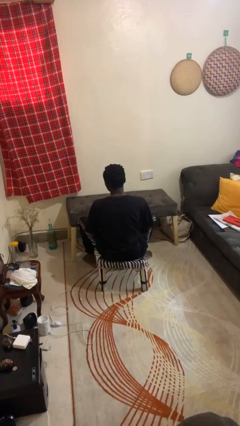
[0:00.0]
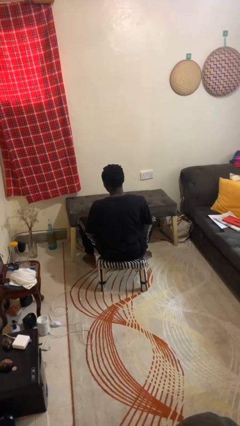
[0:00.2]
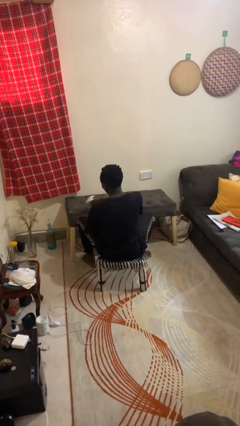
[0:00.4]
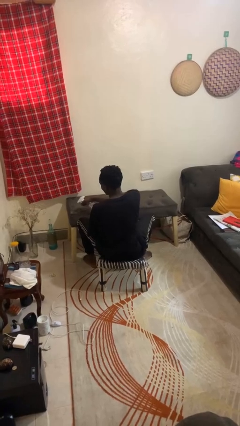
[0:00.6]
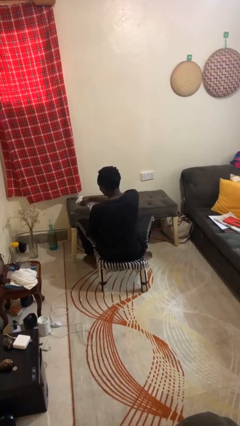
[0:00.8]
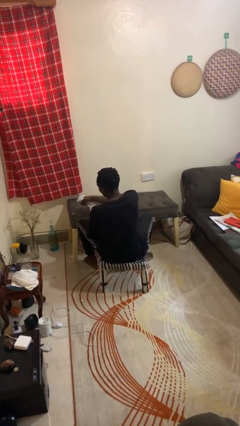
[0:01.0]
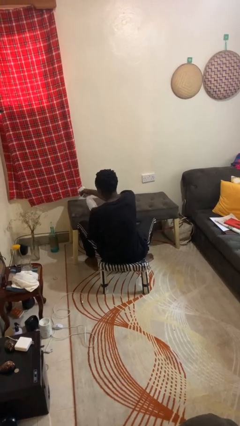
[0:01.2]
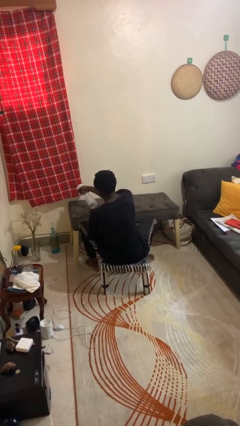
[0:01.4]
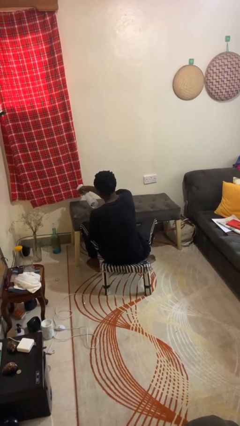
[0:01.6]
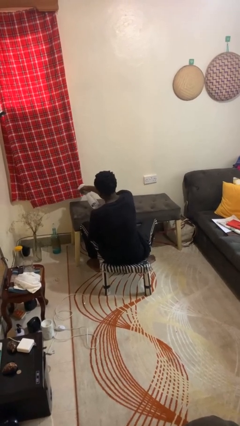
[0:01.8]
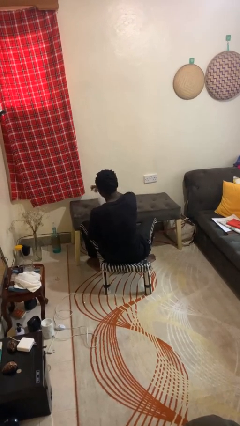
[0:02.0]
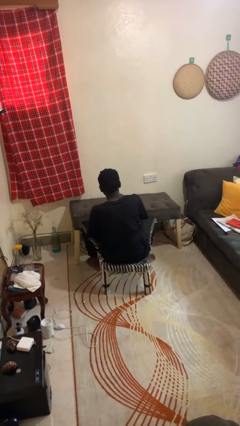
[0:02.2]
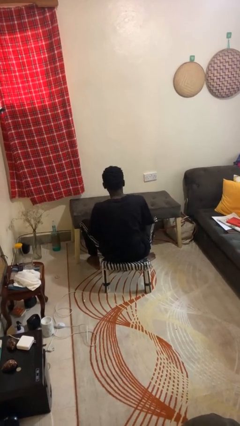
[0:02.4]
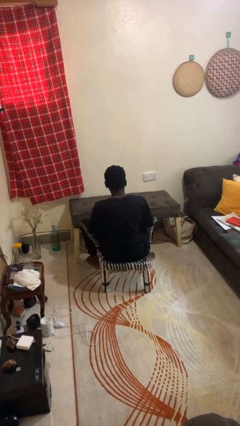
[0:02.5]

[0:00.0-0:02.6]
person sprays from bottle

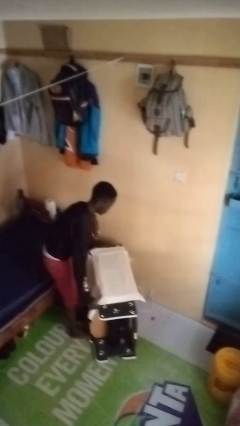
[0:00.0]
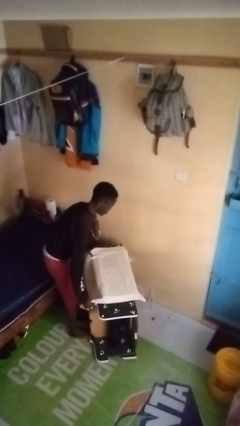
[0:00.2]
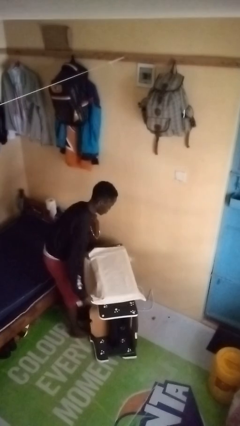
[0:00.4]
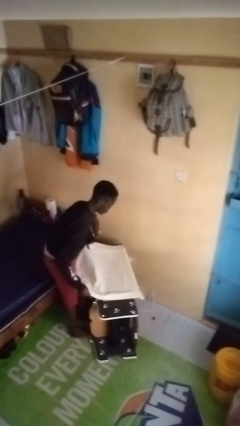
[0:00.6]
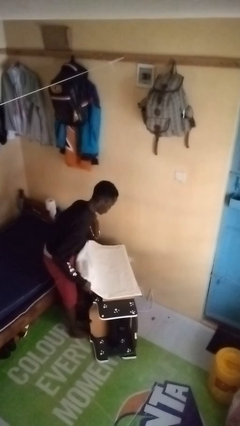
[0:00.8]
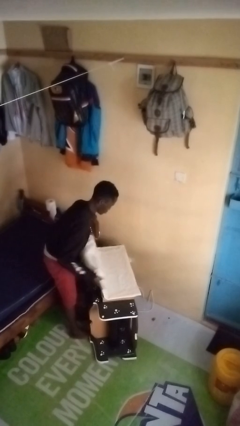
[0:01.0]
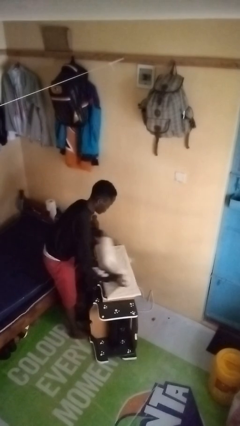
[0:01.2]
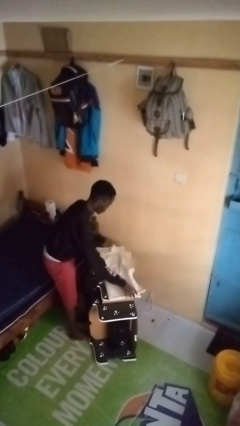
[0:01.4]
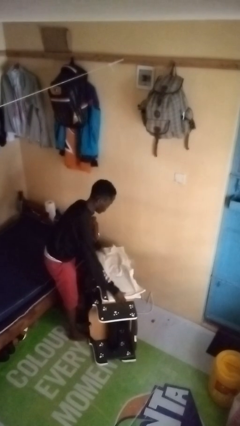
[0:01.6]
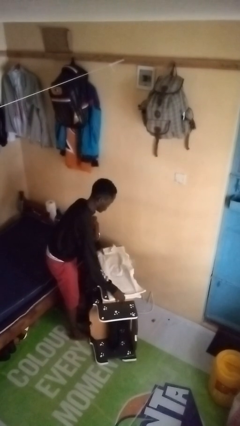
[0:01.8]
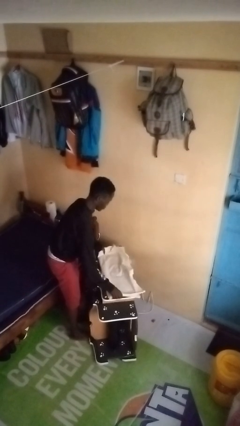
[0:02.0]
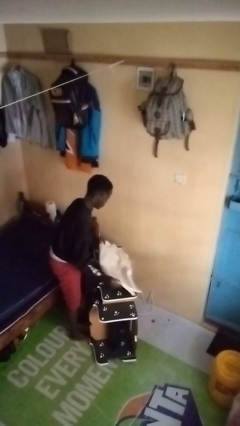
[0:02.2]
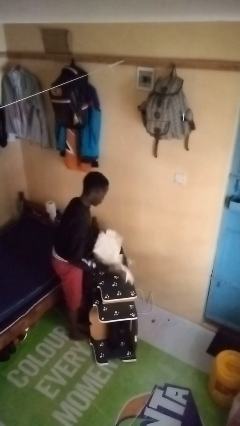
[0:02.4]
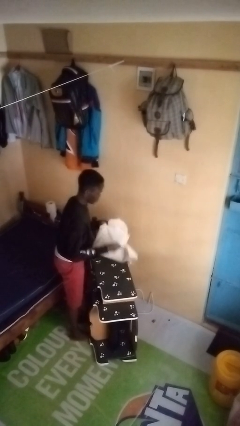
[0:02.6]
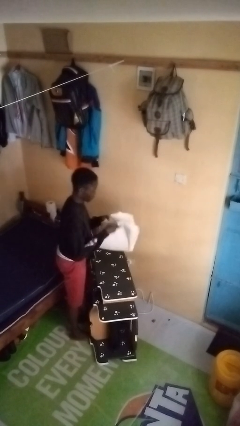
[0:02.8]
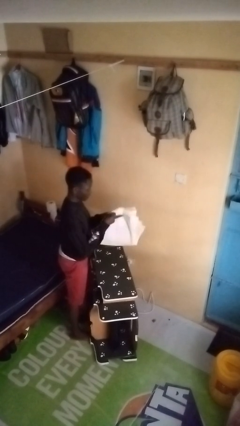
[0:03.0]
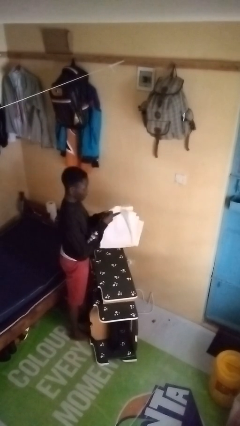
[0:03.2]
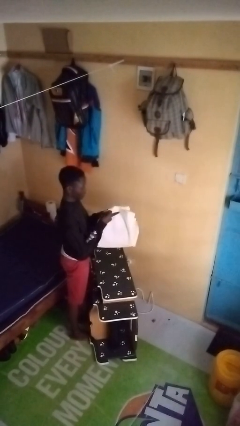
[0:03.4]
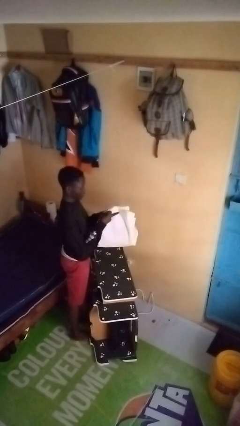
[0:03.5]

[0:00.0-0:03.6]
person folds tablecloth

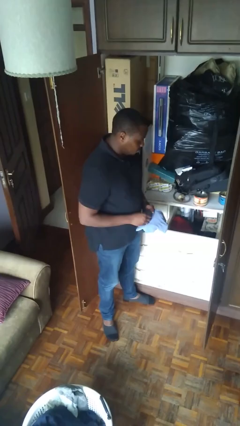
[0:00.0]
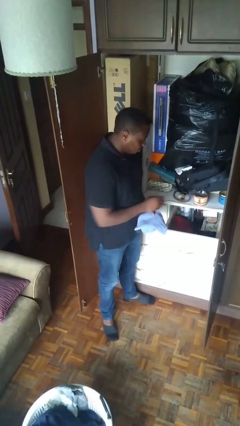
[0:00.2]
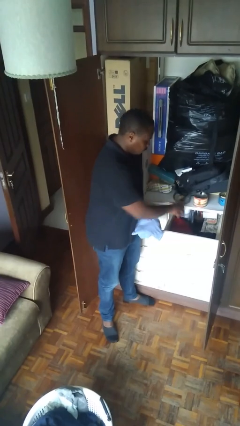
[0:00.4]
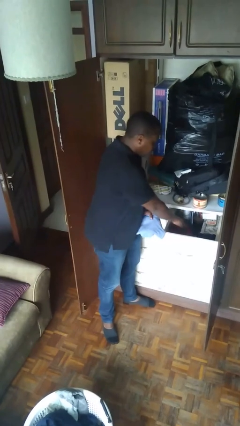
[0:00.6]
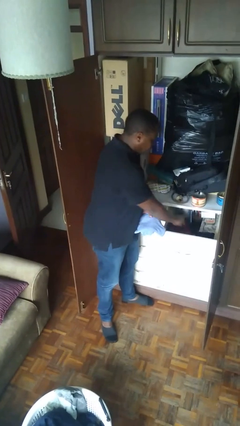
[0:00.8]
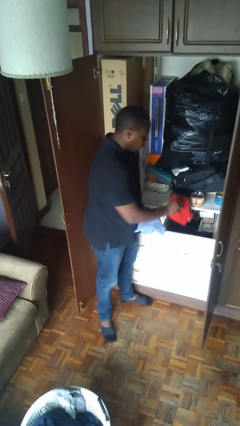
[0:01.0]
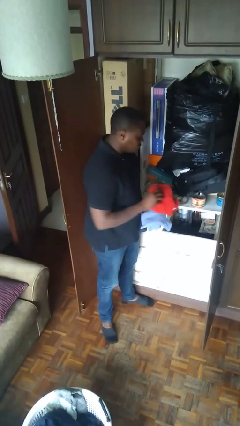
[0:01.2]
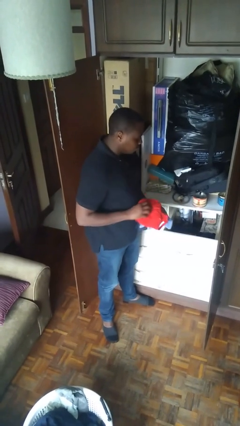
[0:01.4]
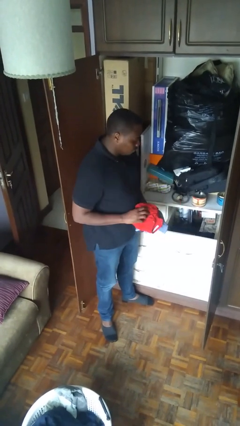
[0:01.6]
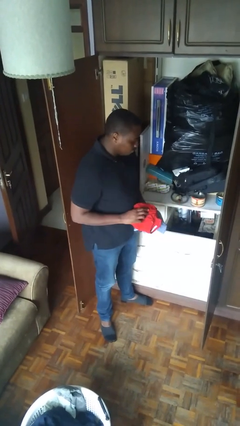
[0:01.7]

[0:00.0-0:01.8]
person takes clothes from dresser

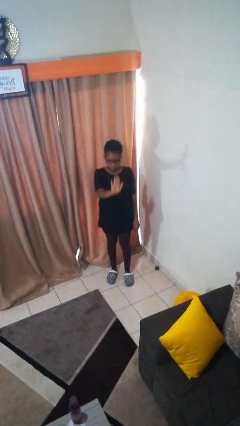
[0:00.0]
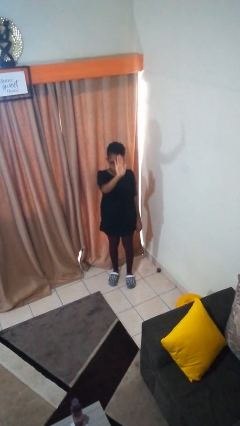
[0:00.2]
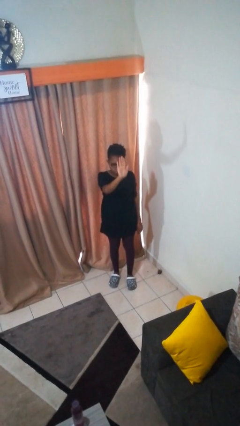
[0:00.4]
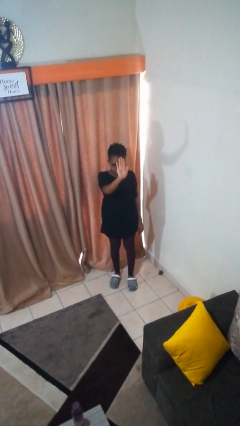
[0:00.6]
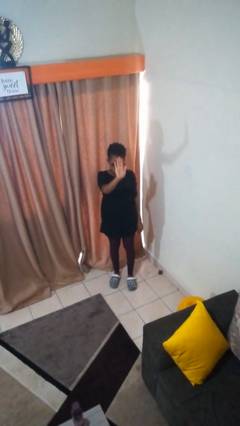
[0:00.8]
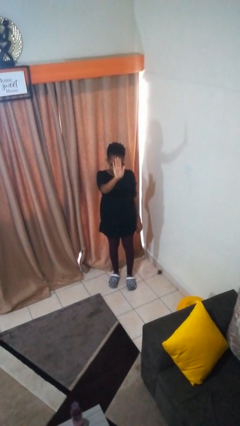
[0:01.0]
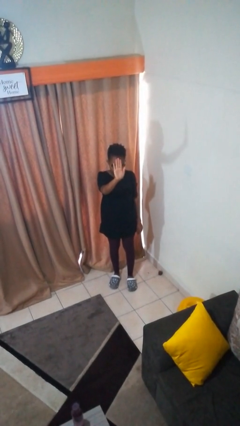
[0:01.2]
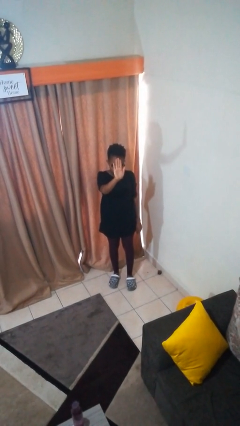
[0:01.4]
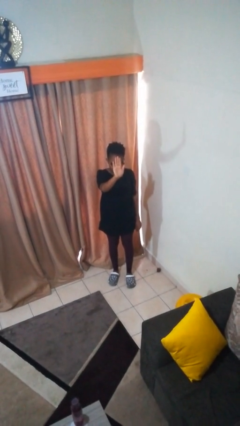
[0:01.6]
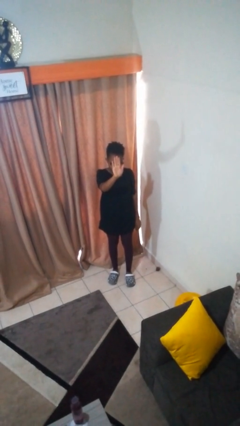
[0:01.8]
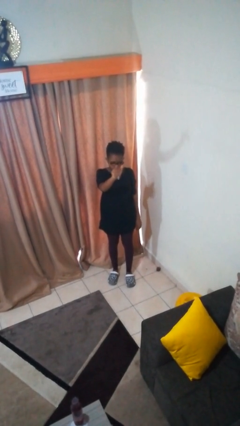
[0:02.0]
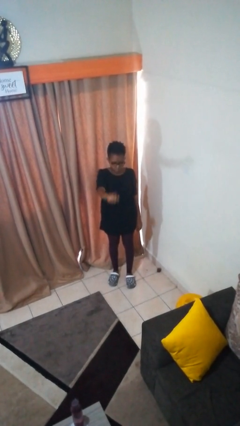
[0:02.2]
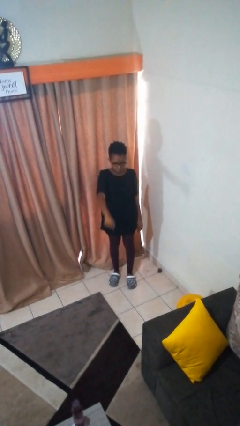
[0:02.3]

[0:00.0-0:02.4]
person gestures stop

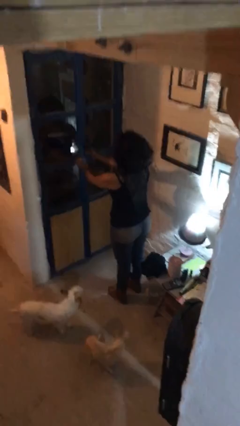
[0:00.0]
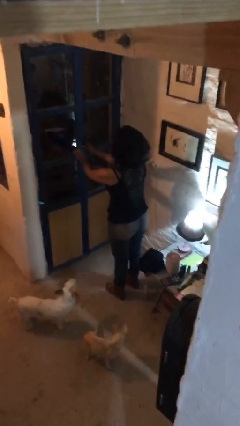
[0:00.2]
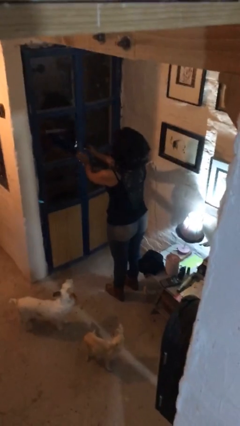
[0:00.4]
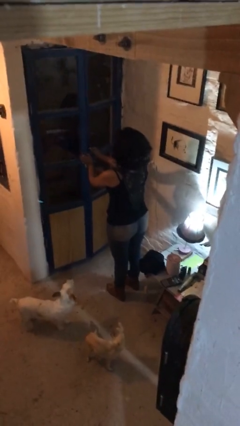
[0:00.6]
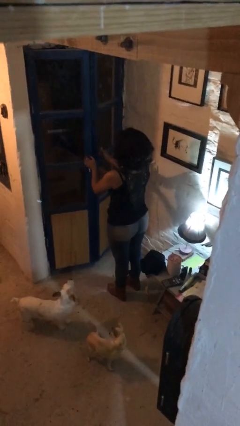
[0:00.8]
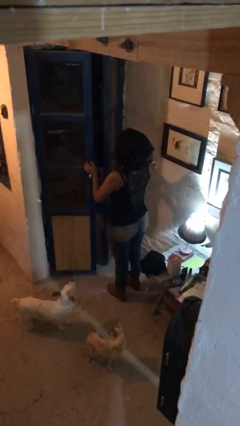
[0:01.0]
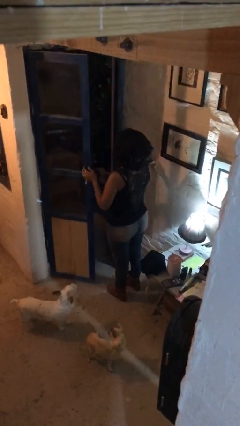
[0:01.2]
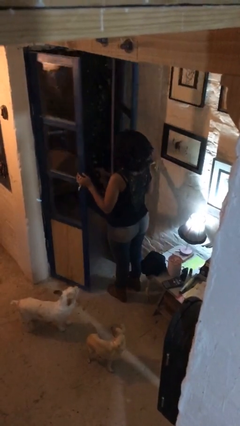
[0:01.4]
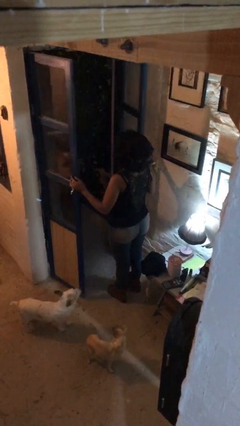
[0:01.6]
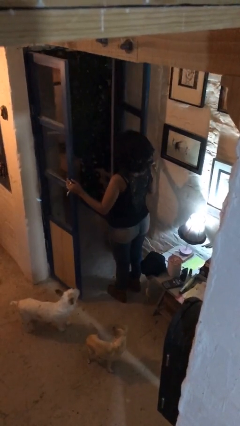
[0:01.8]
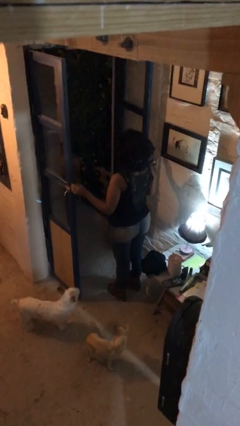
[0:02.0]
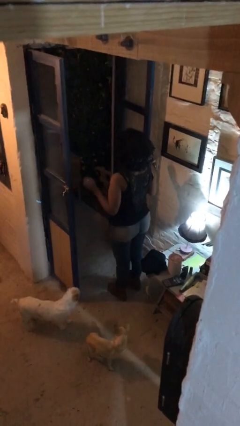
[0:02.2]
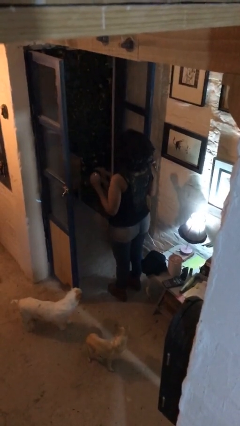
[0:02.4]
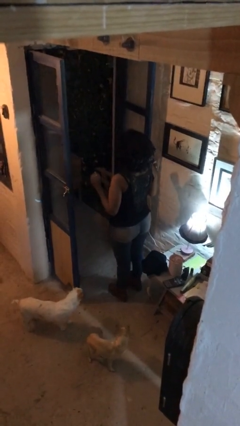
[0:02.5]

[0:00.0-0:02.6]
person opens facility door

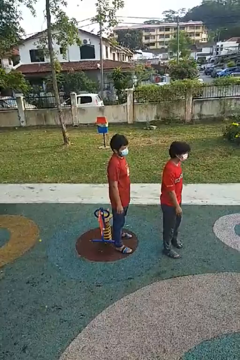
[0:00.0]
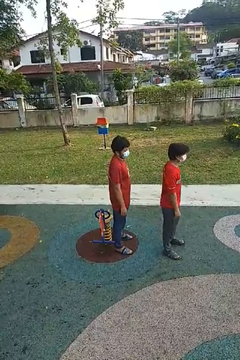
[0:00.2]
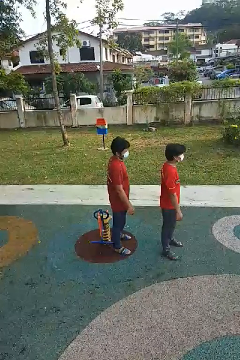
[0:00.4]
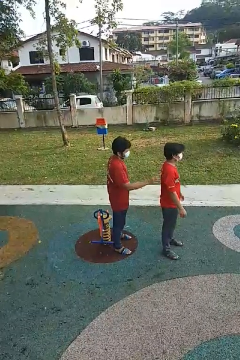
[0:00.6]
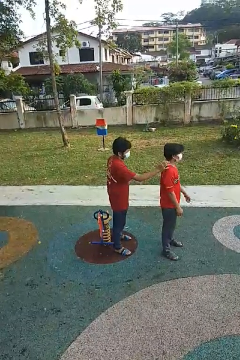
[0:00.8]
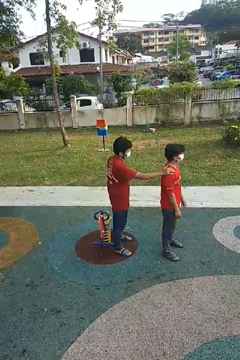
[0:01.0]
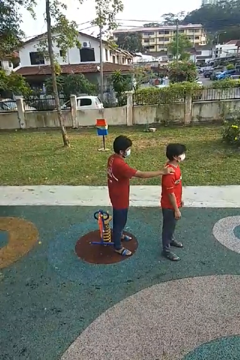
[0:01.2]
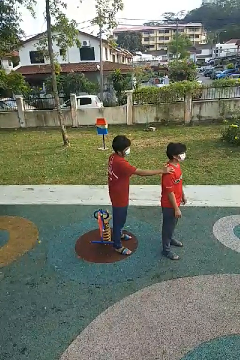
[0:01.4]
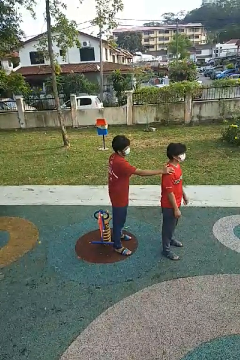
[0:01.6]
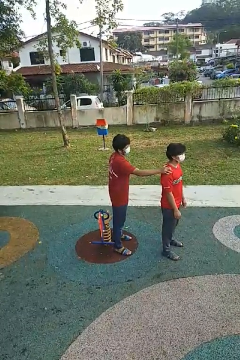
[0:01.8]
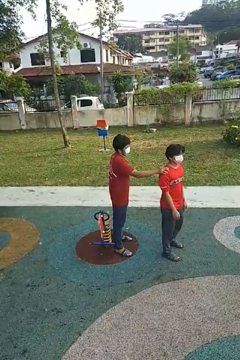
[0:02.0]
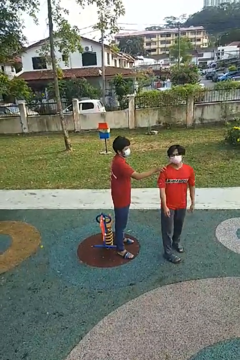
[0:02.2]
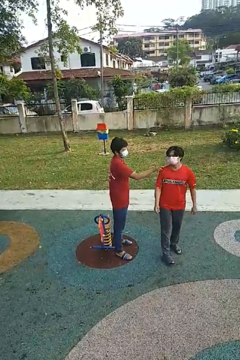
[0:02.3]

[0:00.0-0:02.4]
person grabs person by shoulder

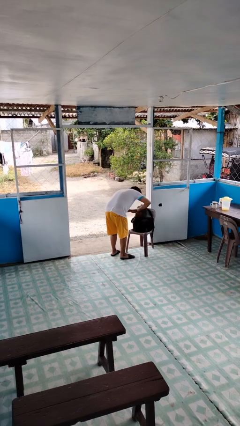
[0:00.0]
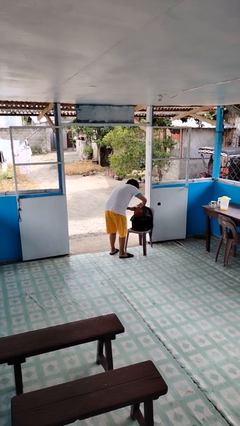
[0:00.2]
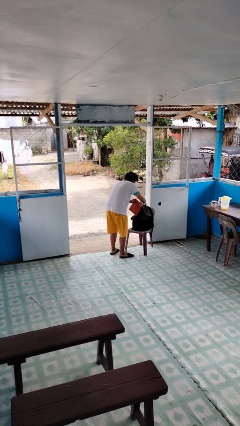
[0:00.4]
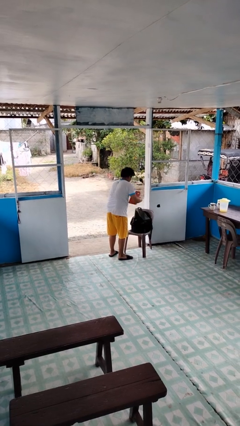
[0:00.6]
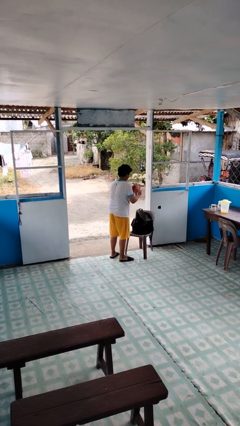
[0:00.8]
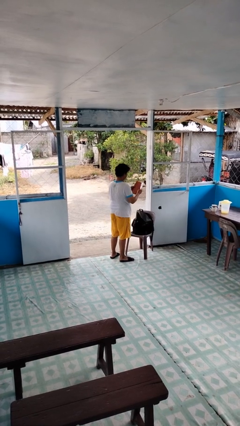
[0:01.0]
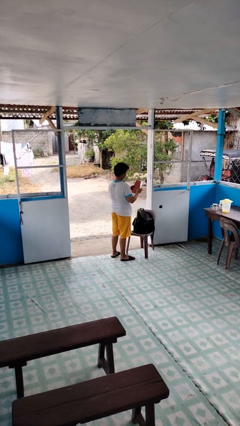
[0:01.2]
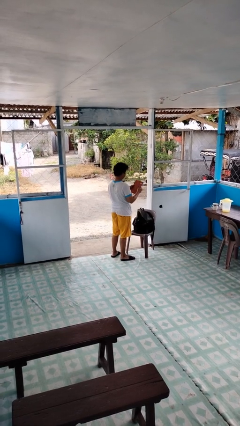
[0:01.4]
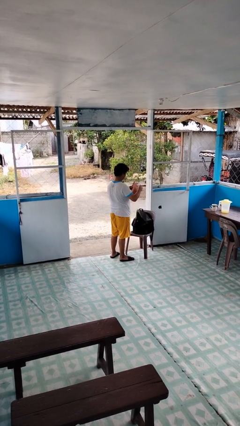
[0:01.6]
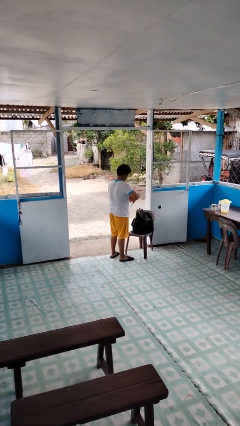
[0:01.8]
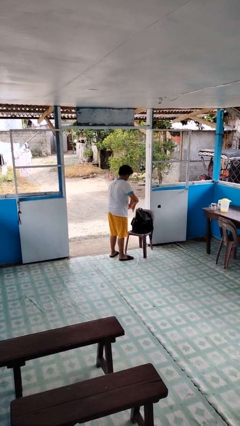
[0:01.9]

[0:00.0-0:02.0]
person takes object from backpack
